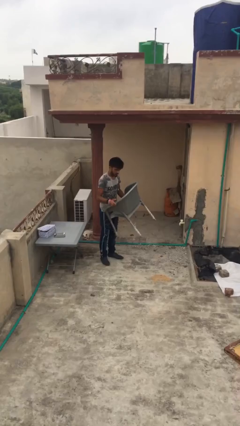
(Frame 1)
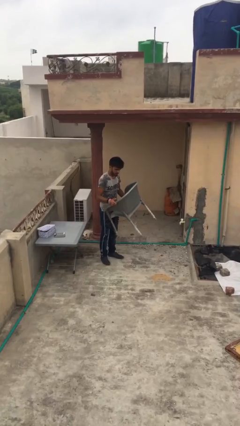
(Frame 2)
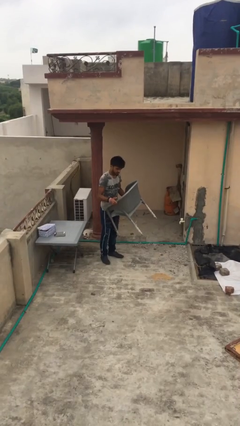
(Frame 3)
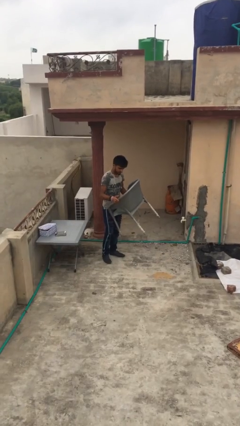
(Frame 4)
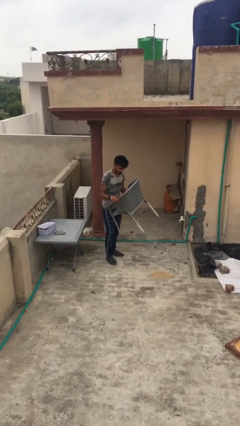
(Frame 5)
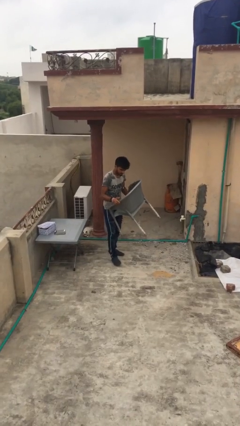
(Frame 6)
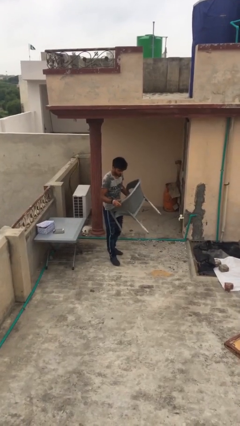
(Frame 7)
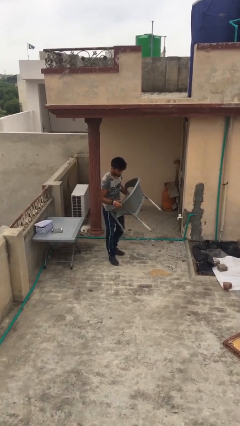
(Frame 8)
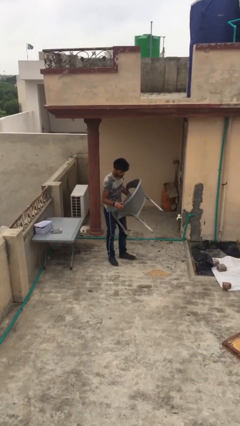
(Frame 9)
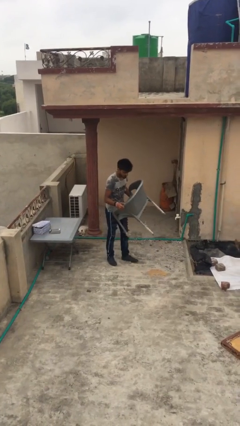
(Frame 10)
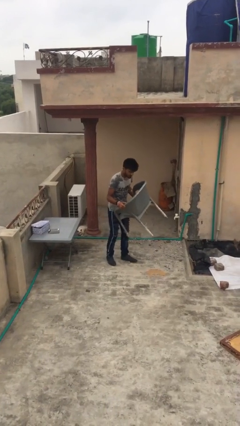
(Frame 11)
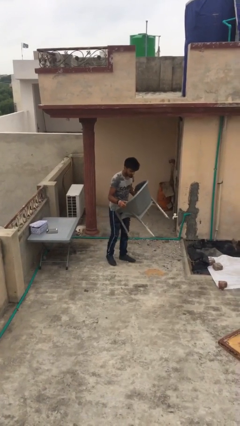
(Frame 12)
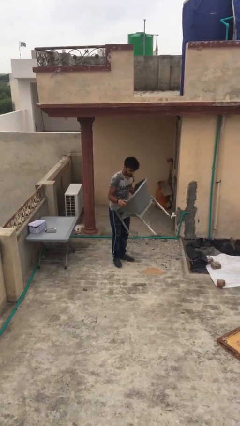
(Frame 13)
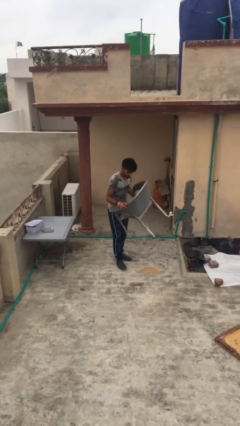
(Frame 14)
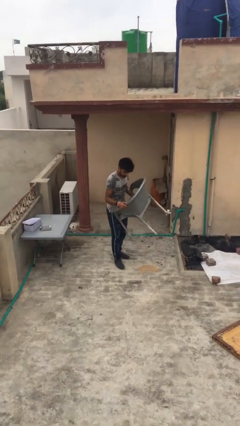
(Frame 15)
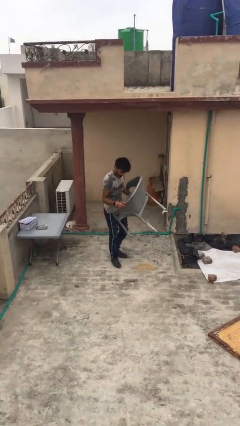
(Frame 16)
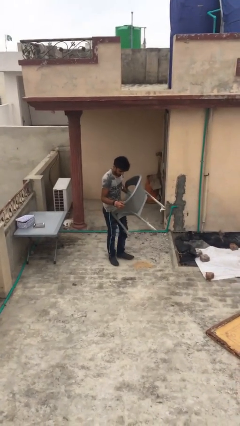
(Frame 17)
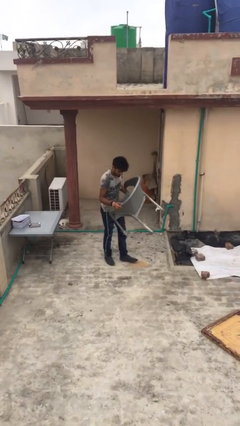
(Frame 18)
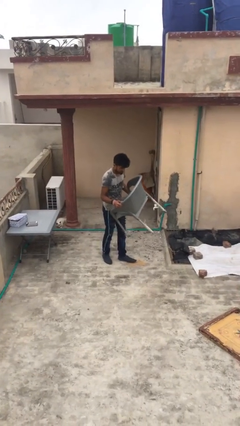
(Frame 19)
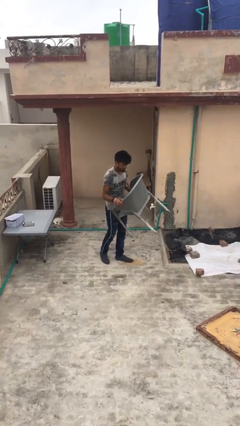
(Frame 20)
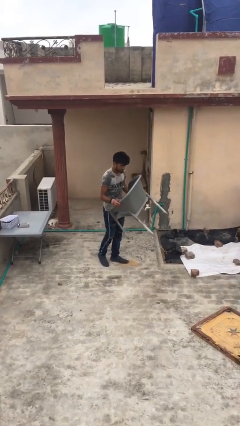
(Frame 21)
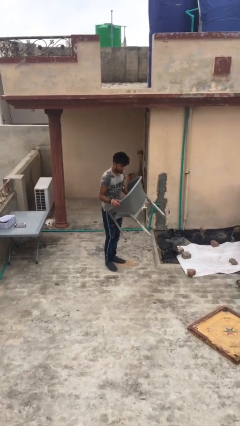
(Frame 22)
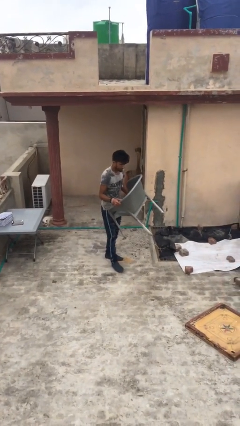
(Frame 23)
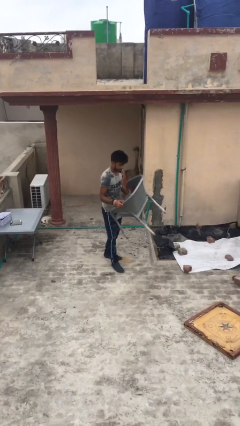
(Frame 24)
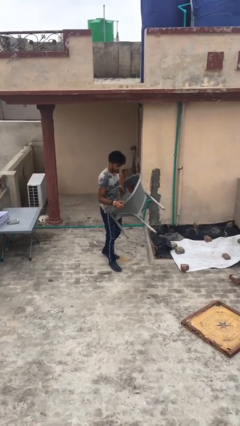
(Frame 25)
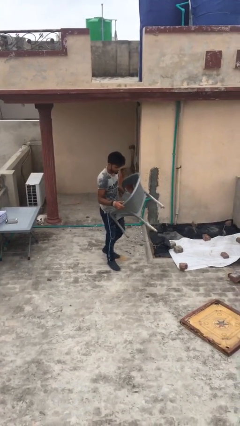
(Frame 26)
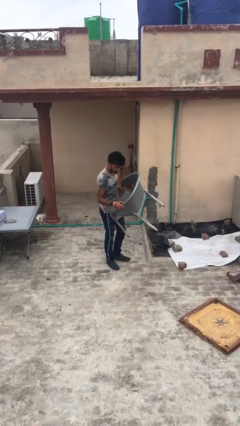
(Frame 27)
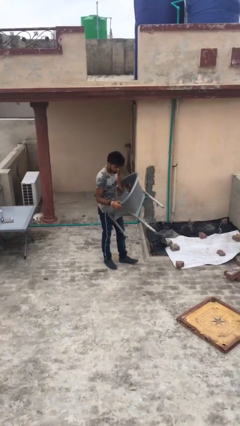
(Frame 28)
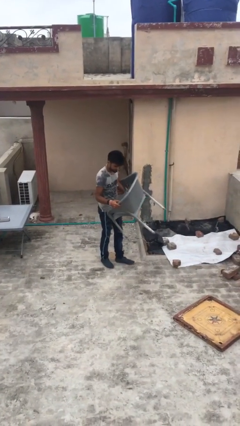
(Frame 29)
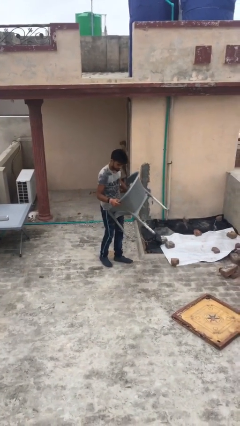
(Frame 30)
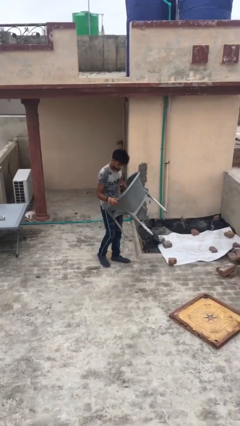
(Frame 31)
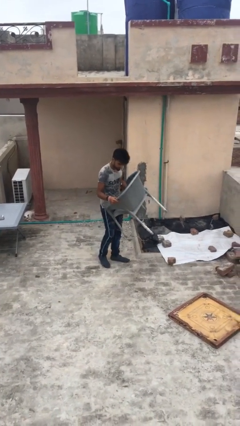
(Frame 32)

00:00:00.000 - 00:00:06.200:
person carries heavy object

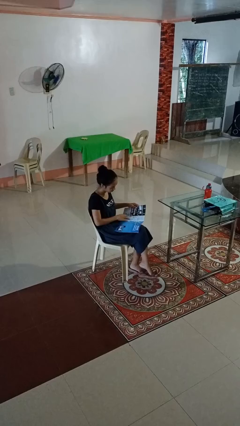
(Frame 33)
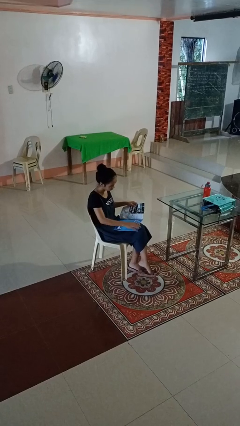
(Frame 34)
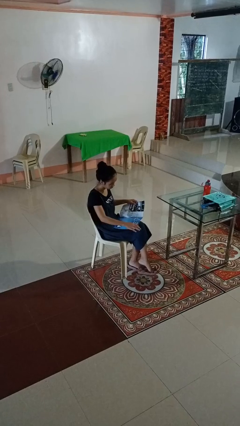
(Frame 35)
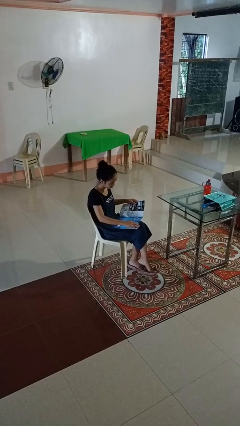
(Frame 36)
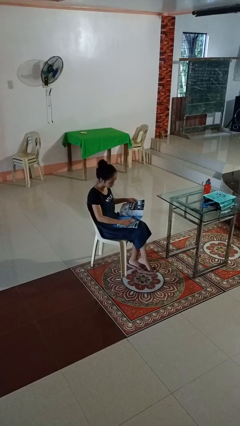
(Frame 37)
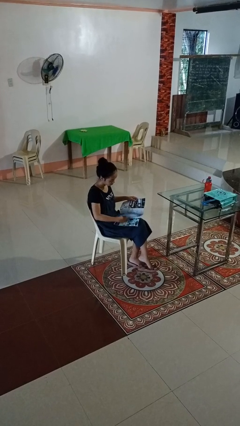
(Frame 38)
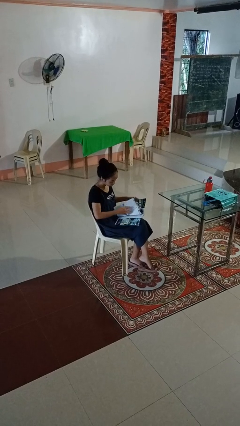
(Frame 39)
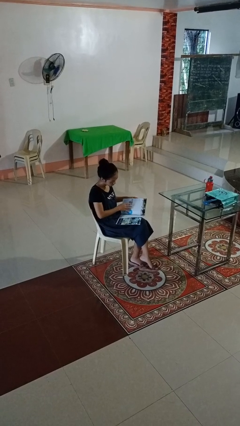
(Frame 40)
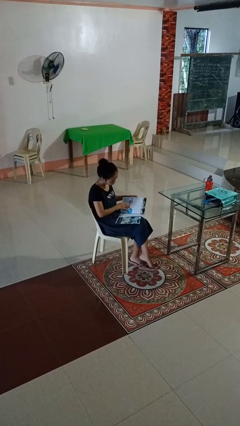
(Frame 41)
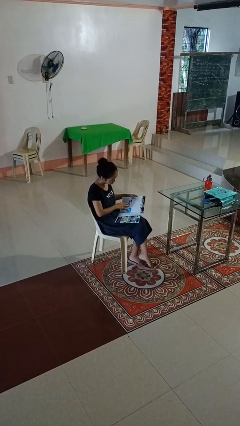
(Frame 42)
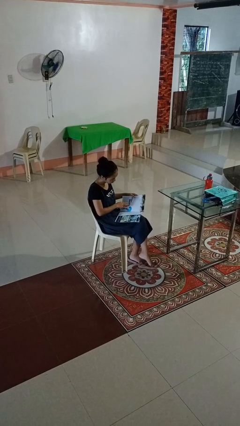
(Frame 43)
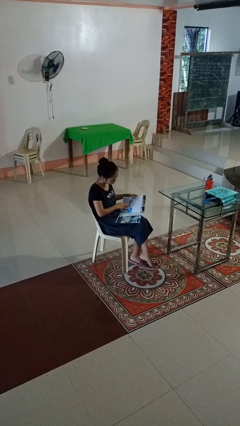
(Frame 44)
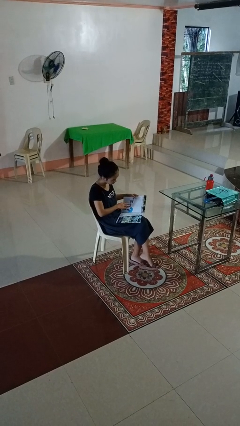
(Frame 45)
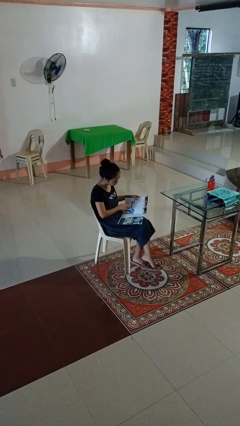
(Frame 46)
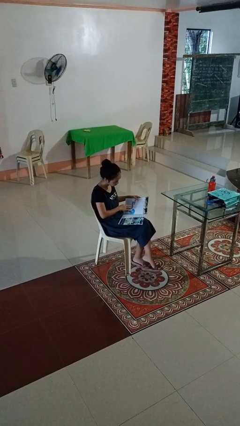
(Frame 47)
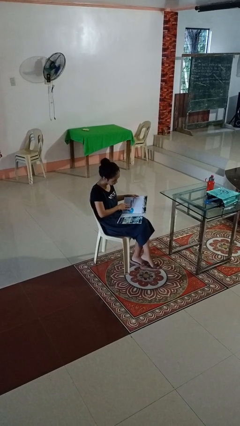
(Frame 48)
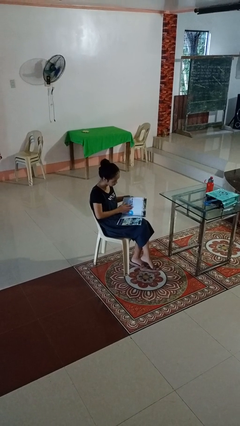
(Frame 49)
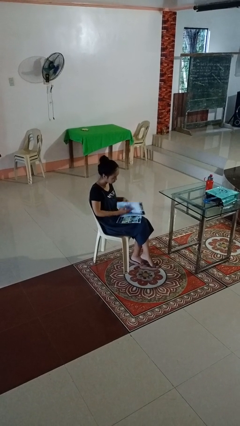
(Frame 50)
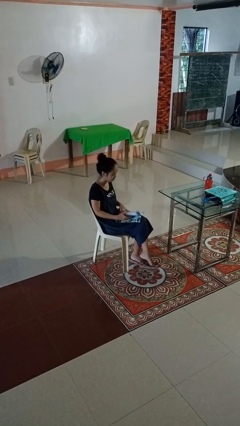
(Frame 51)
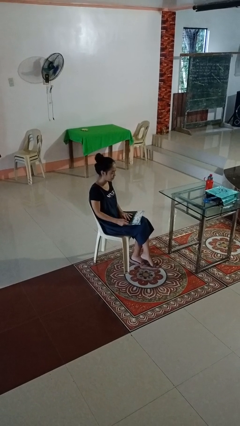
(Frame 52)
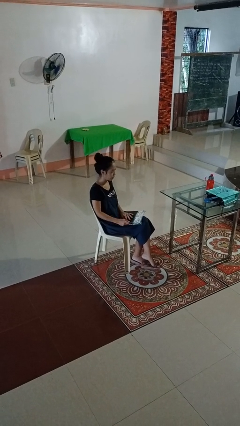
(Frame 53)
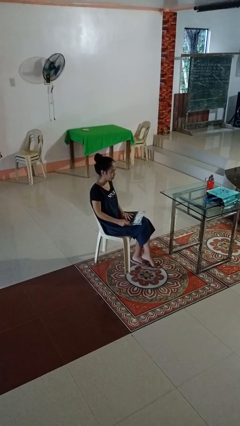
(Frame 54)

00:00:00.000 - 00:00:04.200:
person reads magazine

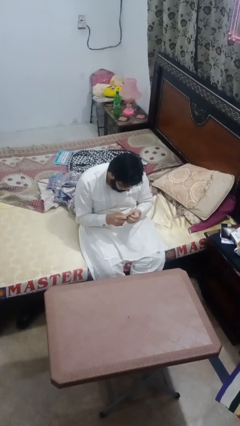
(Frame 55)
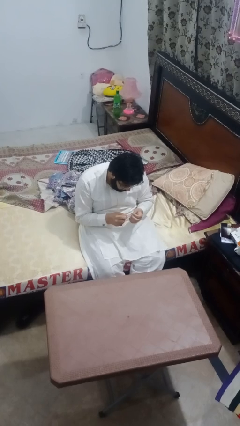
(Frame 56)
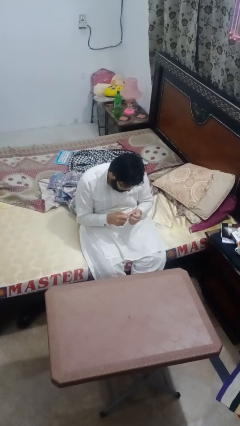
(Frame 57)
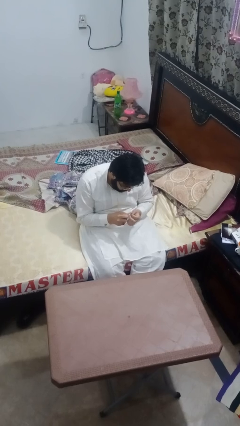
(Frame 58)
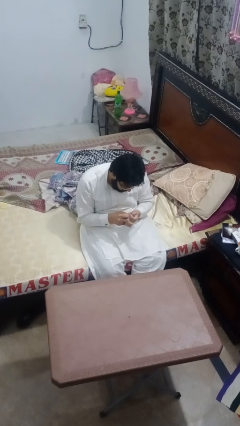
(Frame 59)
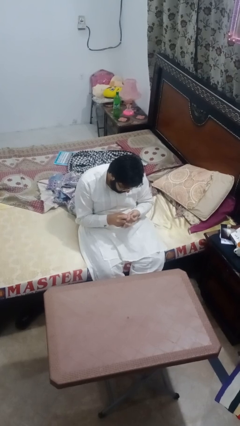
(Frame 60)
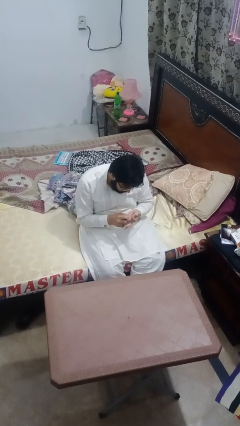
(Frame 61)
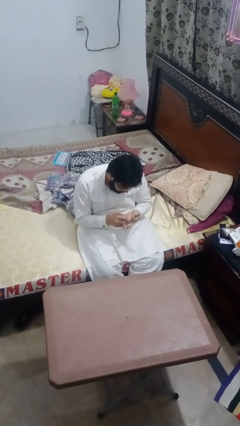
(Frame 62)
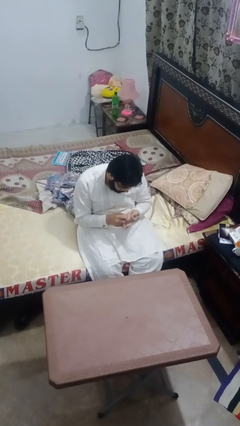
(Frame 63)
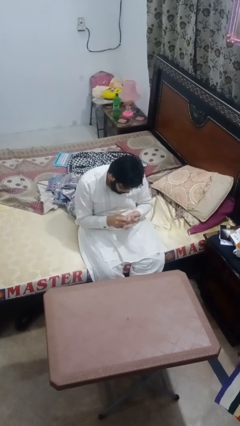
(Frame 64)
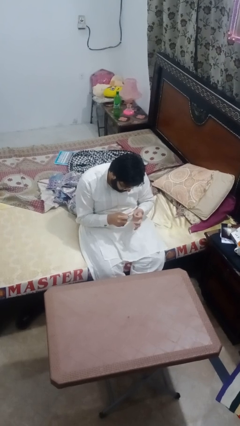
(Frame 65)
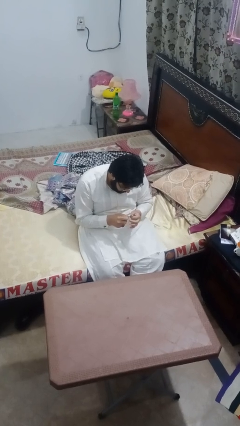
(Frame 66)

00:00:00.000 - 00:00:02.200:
person files fingernails

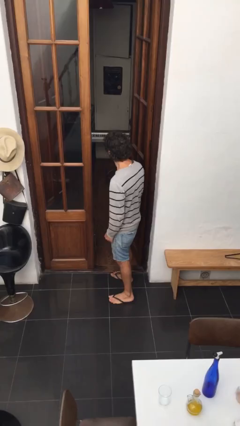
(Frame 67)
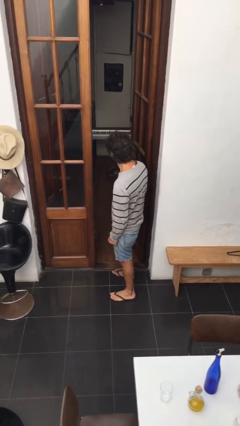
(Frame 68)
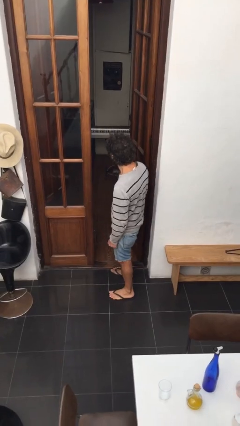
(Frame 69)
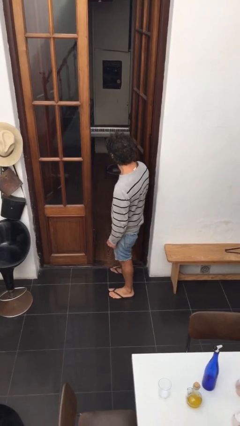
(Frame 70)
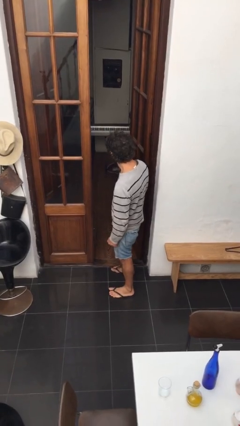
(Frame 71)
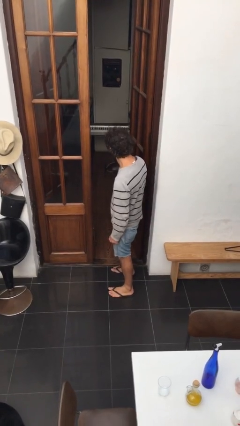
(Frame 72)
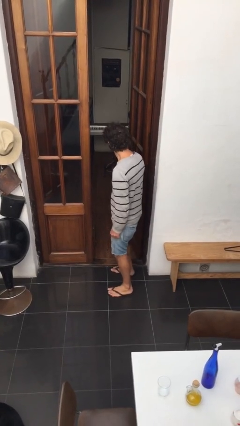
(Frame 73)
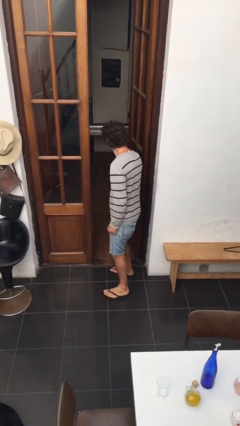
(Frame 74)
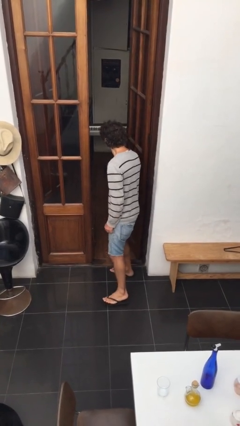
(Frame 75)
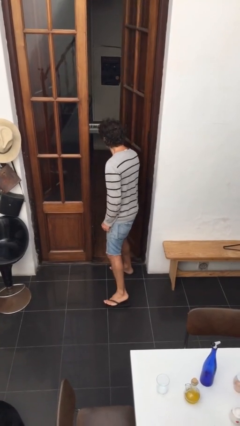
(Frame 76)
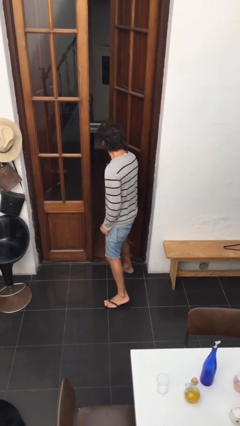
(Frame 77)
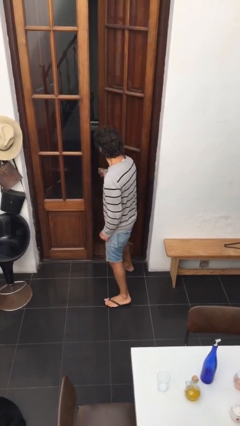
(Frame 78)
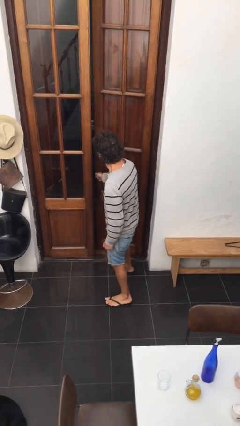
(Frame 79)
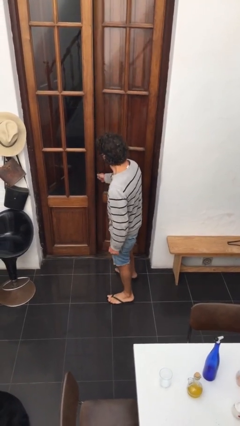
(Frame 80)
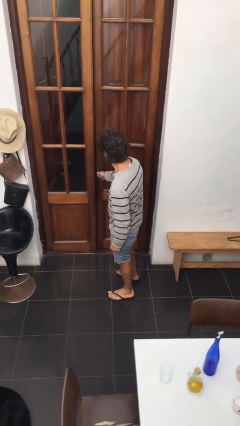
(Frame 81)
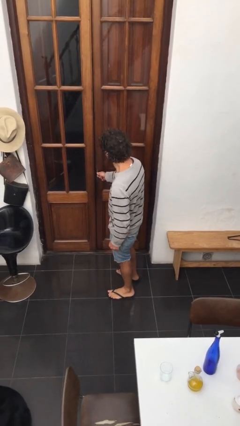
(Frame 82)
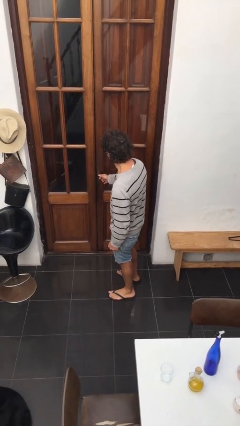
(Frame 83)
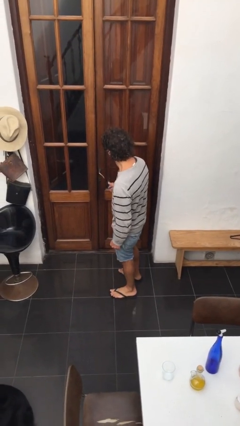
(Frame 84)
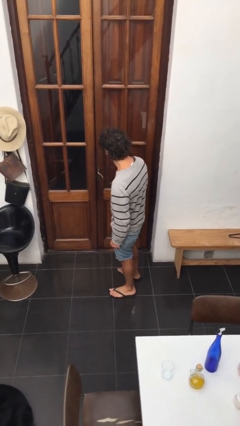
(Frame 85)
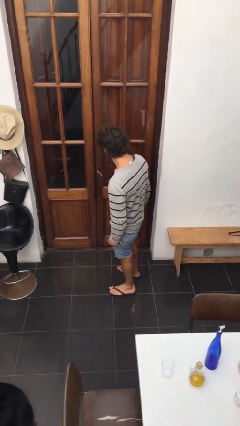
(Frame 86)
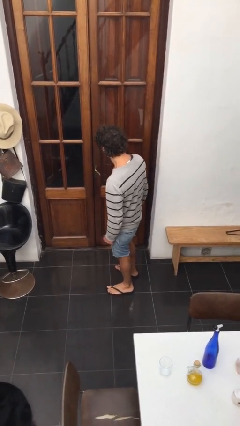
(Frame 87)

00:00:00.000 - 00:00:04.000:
person closes facility door

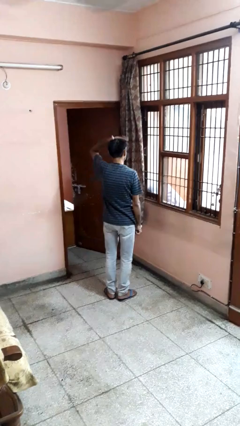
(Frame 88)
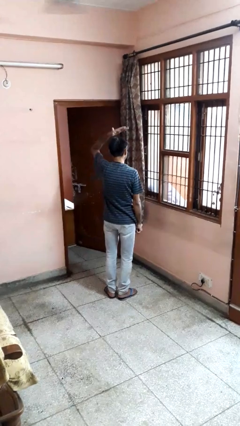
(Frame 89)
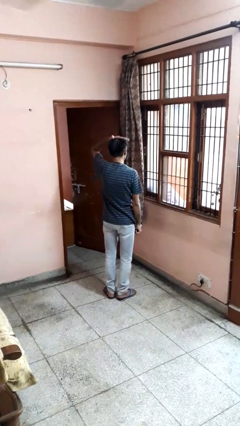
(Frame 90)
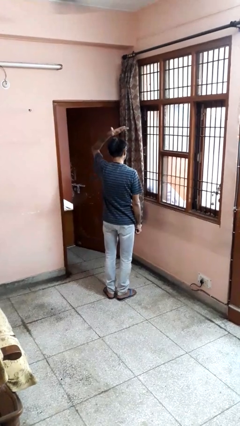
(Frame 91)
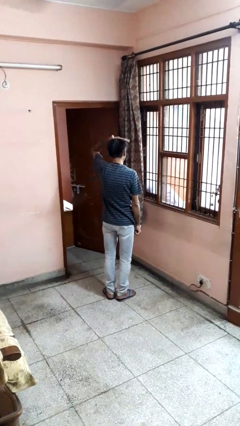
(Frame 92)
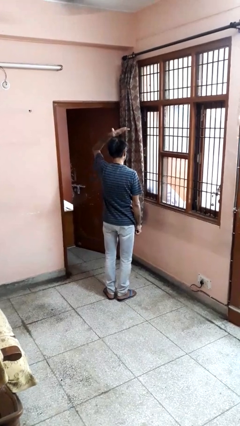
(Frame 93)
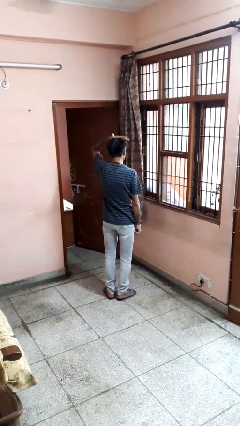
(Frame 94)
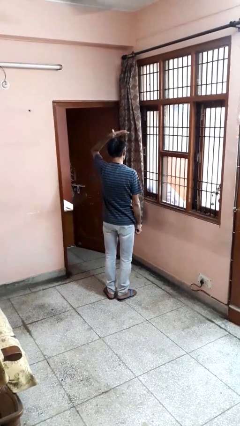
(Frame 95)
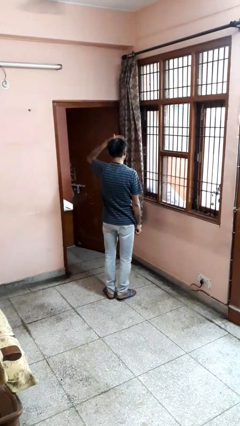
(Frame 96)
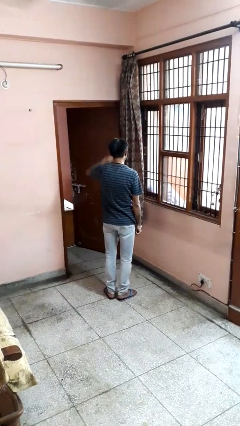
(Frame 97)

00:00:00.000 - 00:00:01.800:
person pats head
